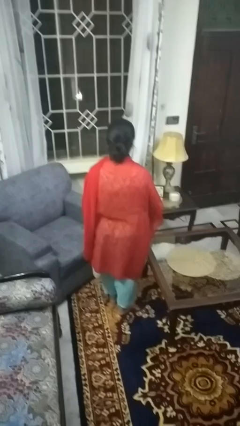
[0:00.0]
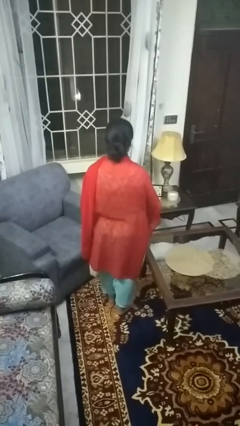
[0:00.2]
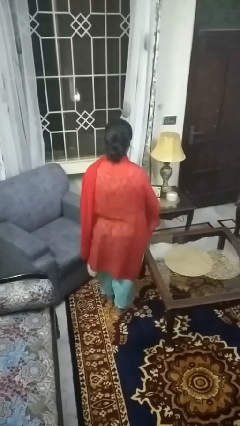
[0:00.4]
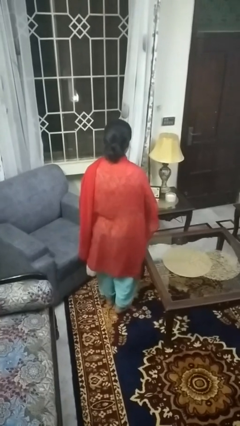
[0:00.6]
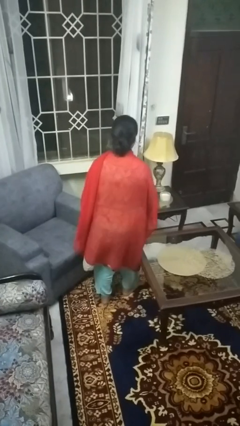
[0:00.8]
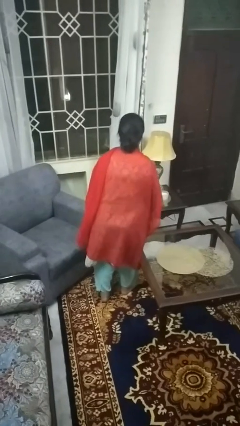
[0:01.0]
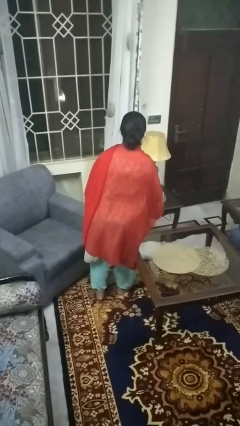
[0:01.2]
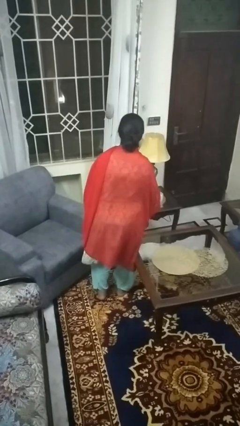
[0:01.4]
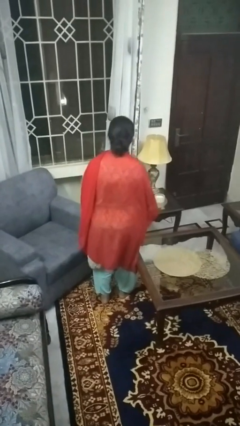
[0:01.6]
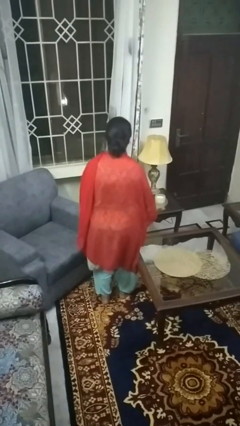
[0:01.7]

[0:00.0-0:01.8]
person bumps into table

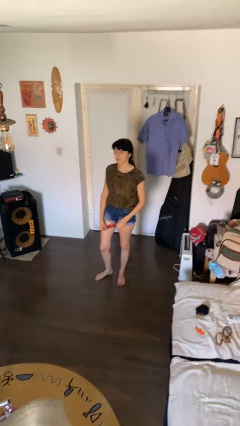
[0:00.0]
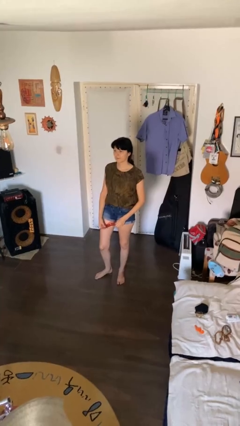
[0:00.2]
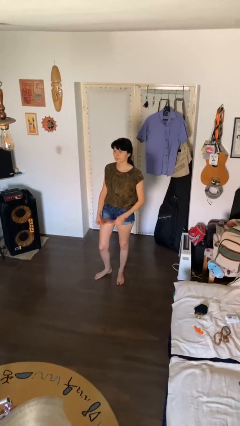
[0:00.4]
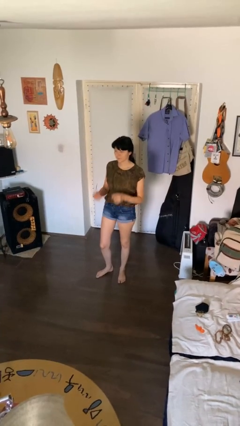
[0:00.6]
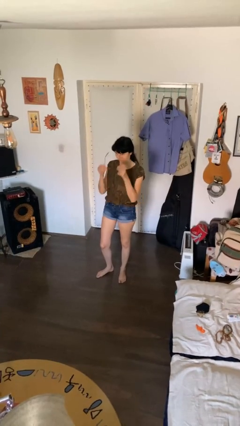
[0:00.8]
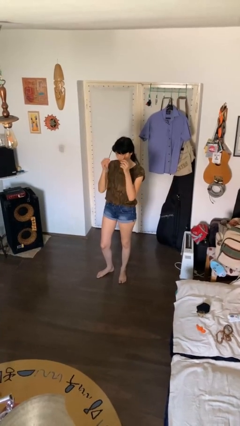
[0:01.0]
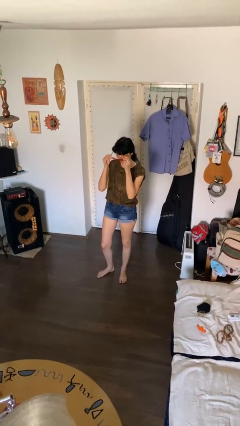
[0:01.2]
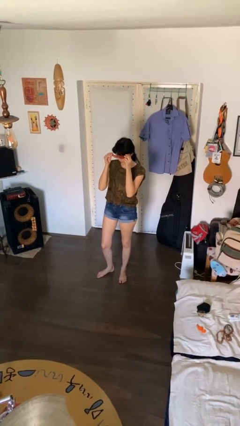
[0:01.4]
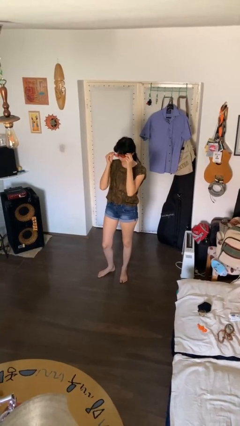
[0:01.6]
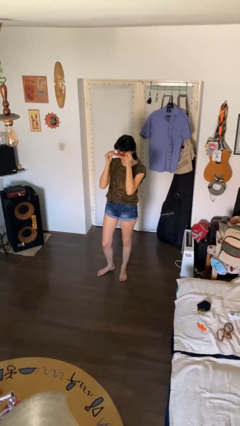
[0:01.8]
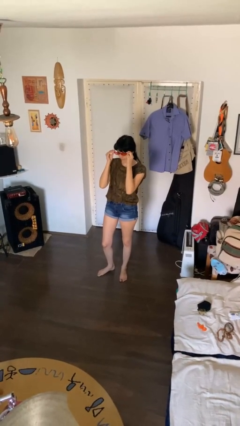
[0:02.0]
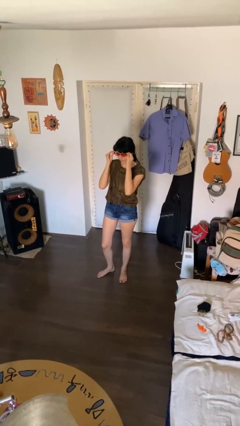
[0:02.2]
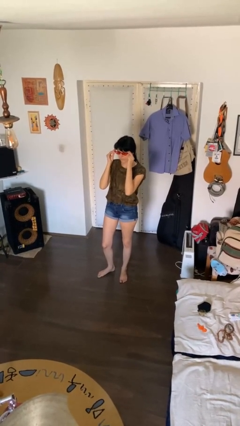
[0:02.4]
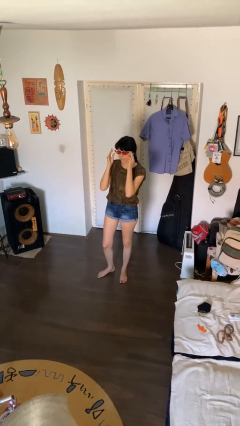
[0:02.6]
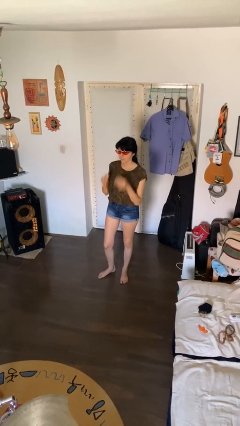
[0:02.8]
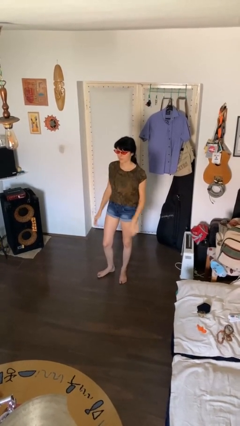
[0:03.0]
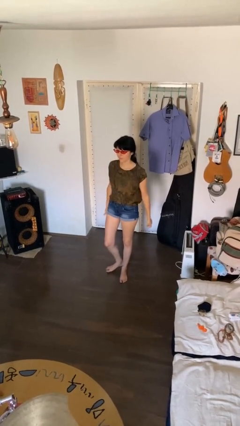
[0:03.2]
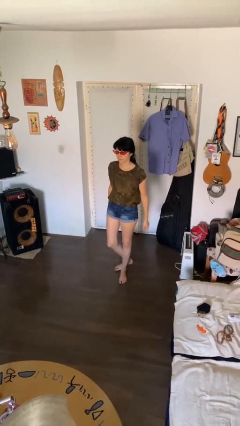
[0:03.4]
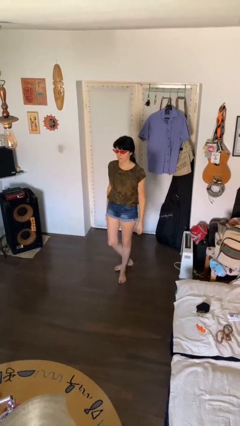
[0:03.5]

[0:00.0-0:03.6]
person puts on sunglasses

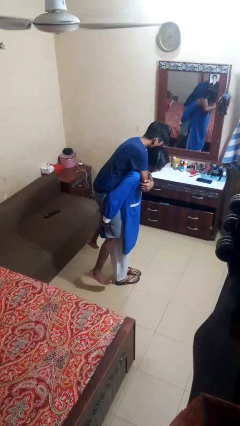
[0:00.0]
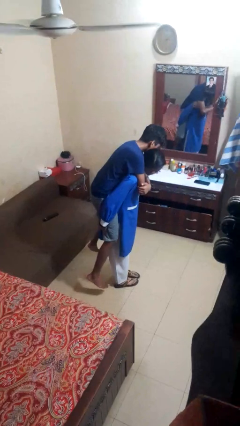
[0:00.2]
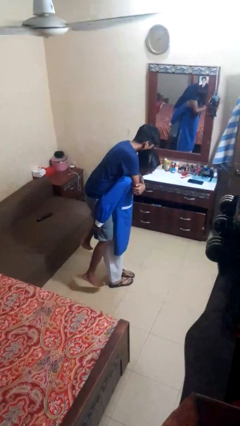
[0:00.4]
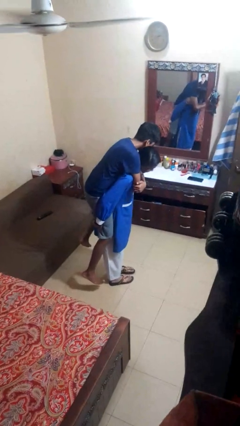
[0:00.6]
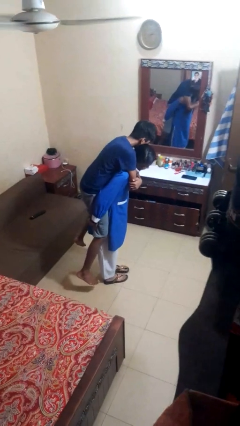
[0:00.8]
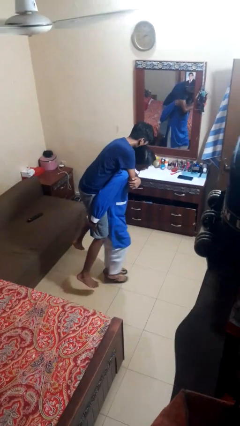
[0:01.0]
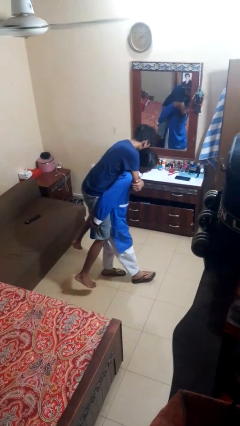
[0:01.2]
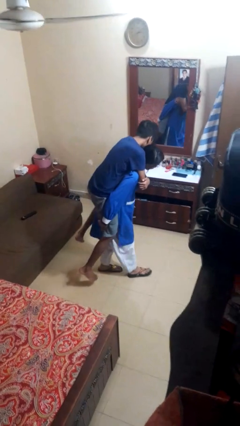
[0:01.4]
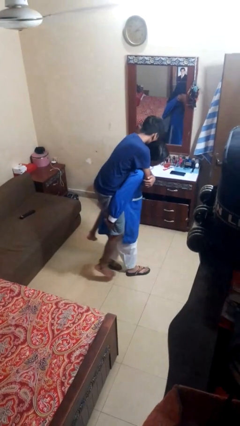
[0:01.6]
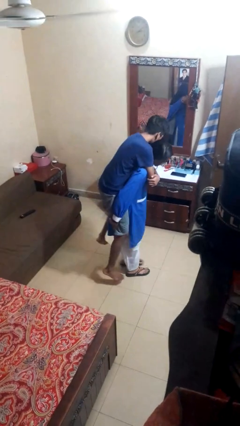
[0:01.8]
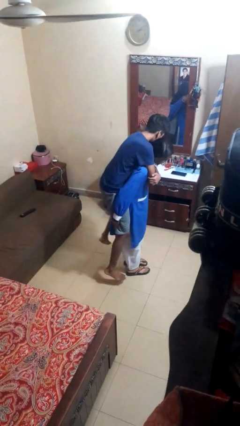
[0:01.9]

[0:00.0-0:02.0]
person carries person on back

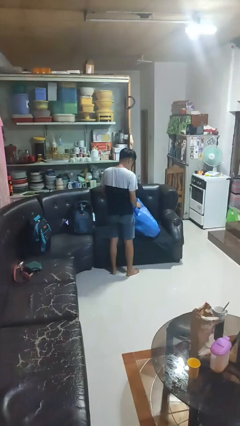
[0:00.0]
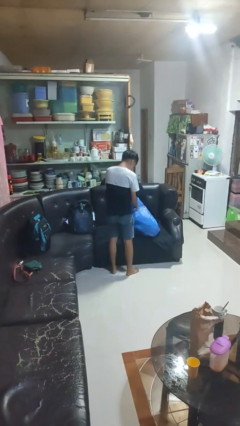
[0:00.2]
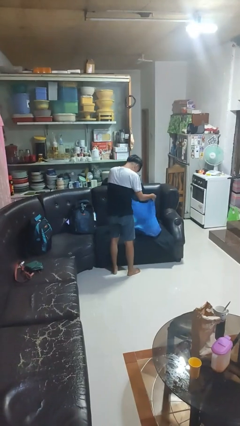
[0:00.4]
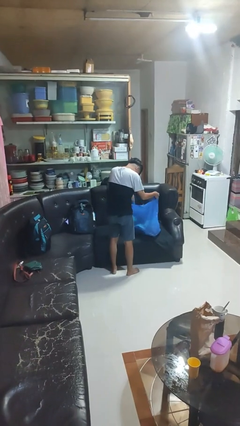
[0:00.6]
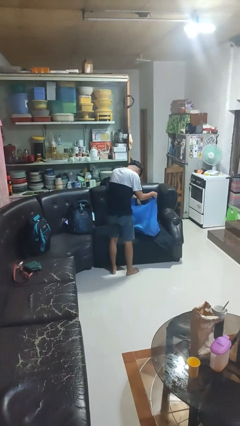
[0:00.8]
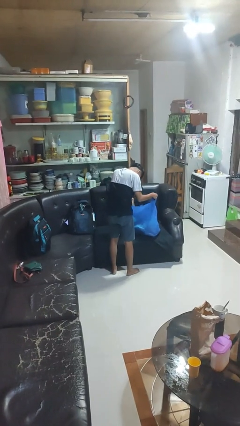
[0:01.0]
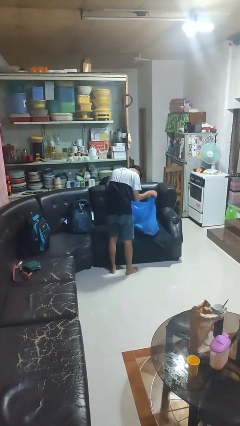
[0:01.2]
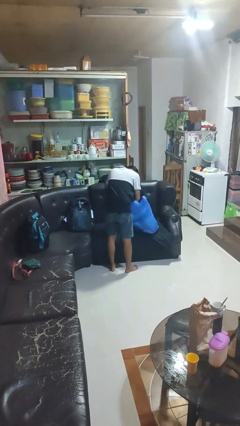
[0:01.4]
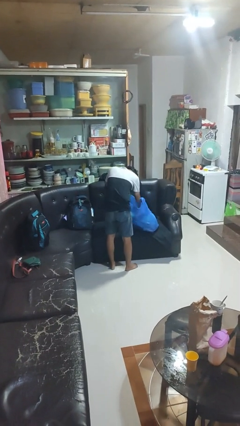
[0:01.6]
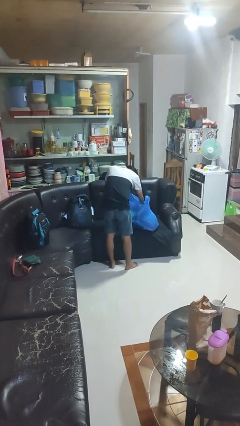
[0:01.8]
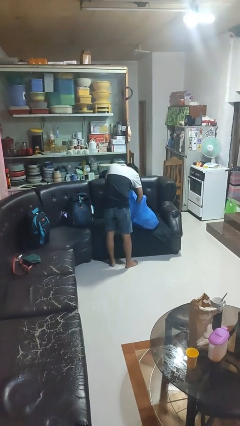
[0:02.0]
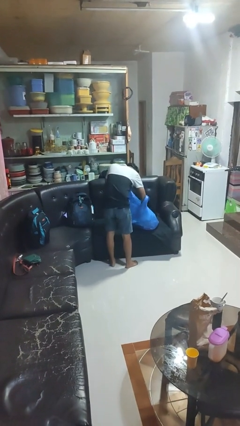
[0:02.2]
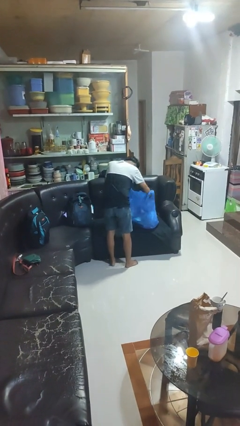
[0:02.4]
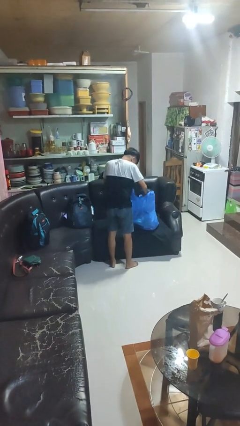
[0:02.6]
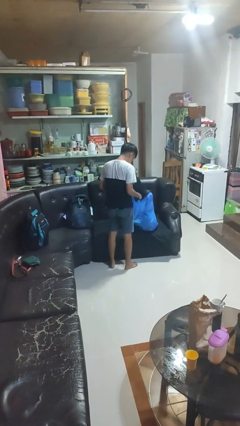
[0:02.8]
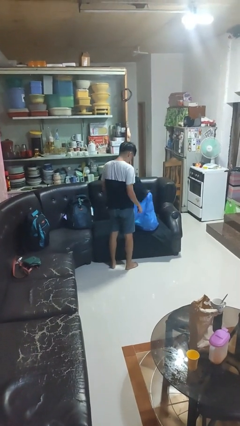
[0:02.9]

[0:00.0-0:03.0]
person searches in bag

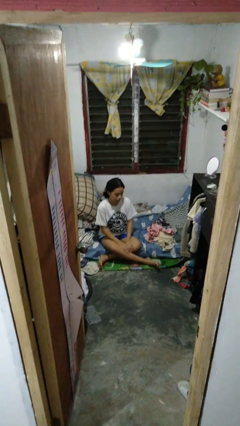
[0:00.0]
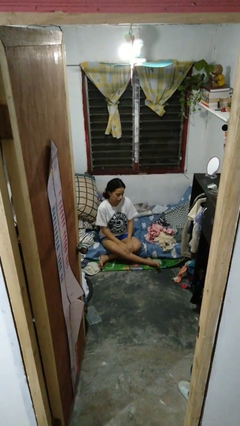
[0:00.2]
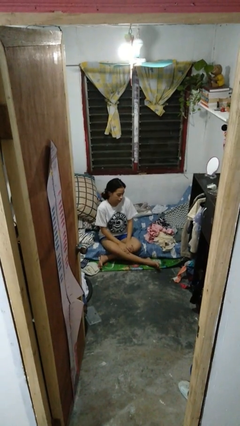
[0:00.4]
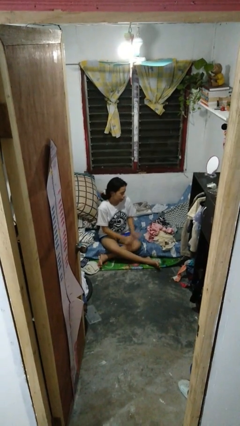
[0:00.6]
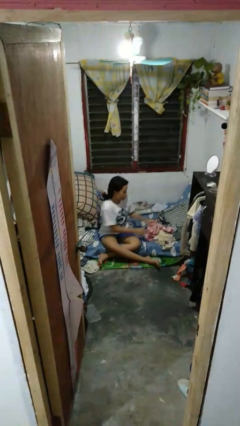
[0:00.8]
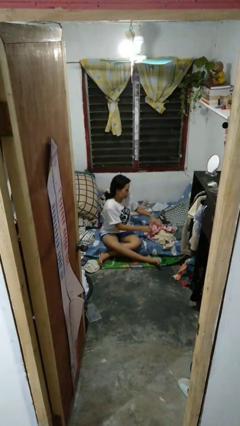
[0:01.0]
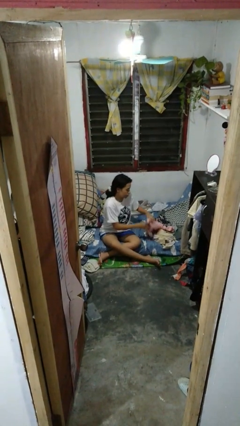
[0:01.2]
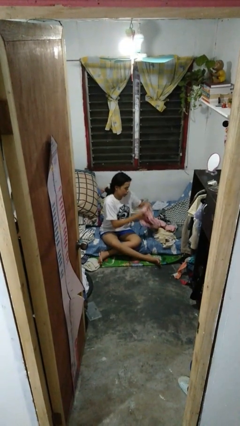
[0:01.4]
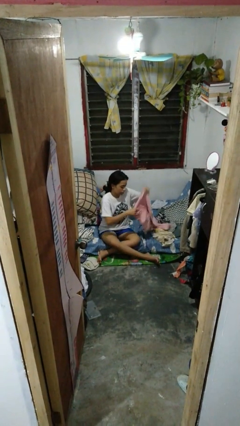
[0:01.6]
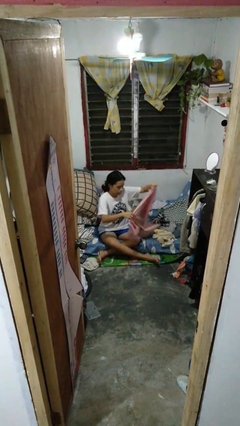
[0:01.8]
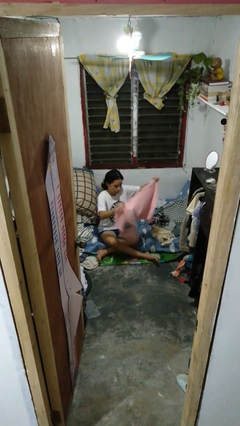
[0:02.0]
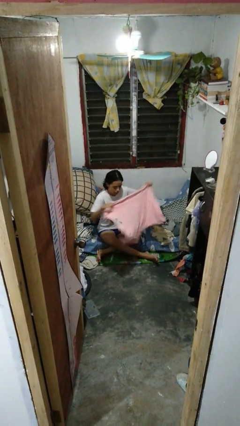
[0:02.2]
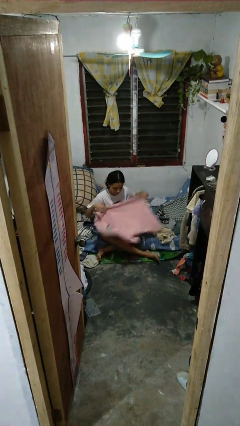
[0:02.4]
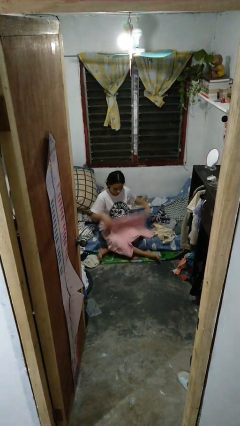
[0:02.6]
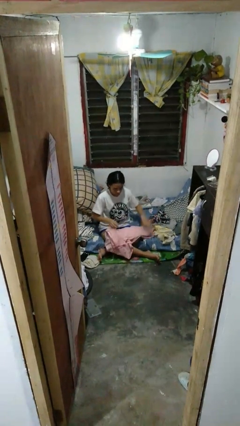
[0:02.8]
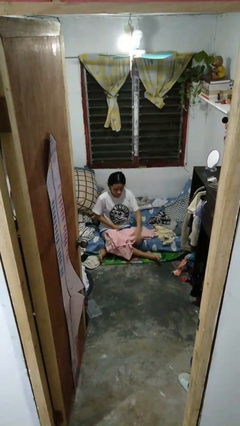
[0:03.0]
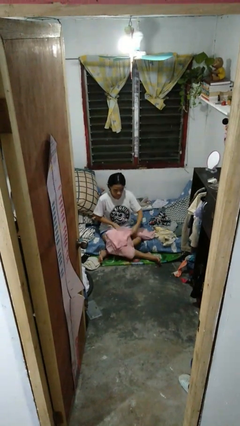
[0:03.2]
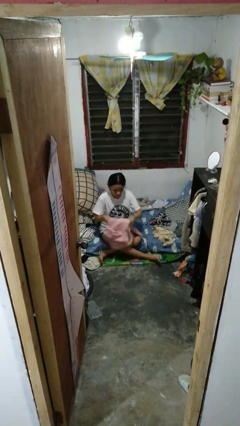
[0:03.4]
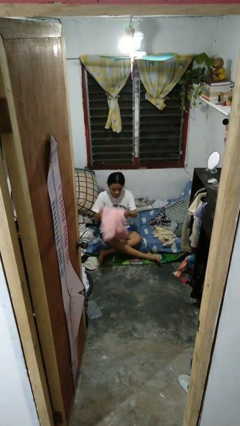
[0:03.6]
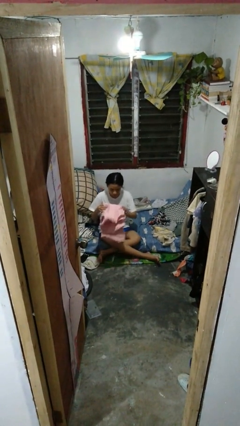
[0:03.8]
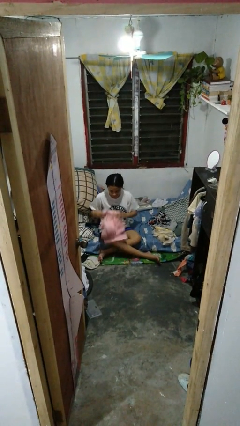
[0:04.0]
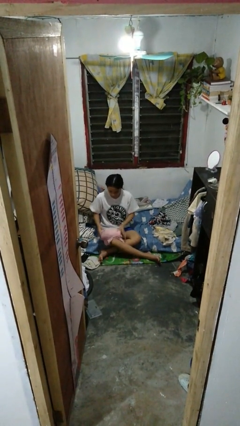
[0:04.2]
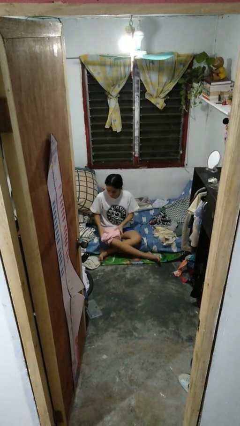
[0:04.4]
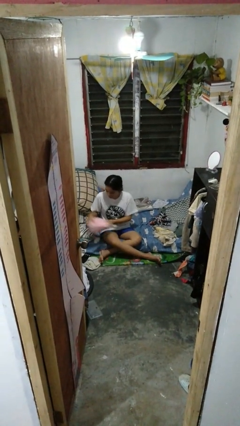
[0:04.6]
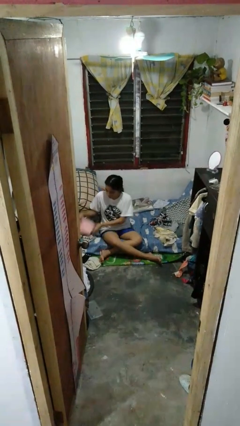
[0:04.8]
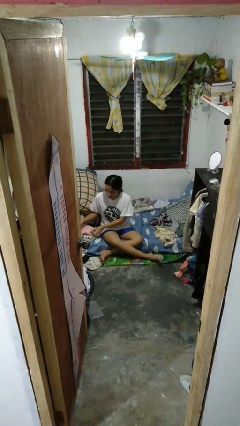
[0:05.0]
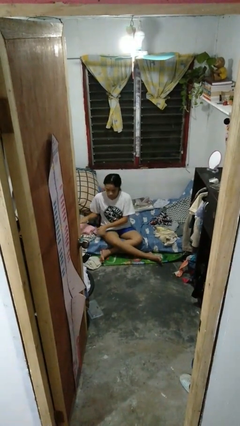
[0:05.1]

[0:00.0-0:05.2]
person folds shirt

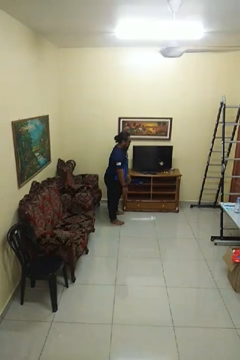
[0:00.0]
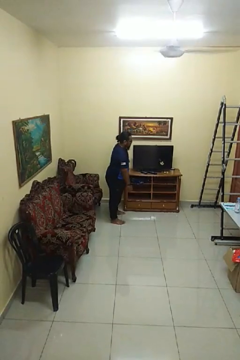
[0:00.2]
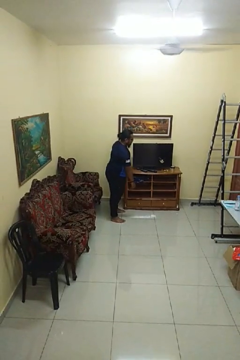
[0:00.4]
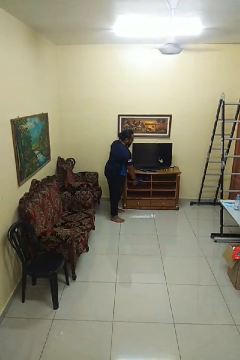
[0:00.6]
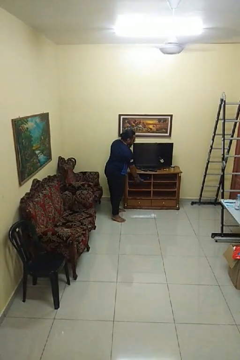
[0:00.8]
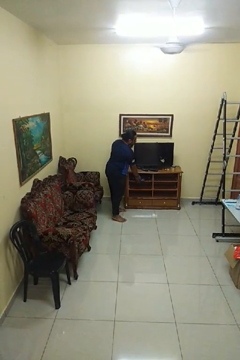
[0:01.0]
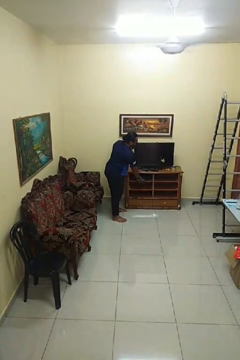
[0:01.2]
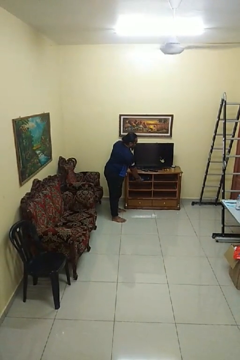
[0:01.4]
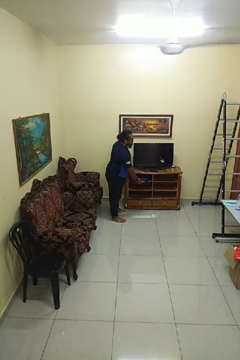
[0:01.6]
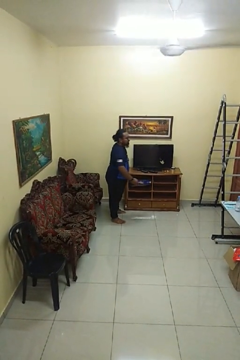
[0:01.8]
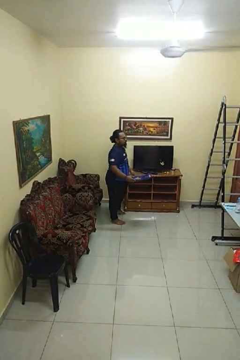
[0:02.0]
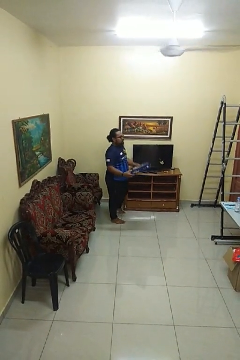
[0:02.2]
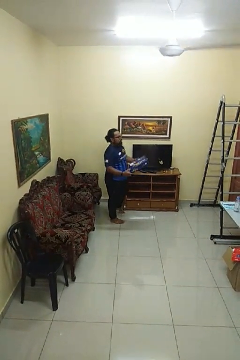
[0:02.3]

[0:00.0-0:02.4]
person picks up object from cabinet
